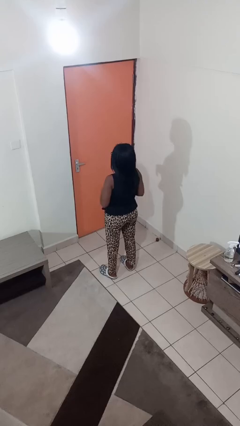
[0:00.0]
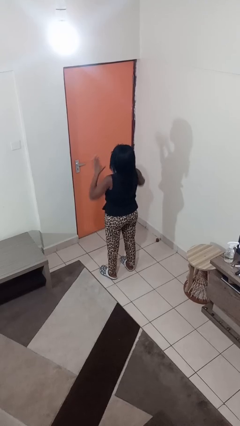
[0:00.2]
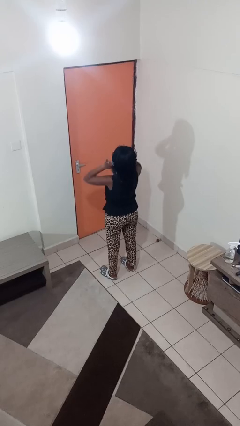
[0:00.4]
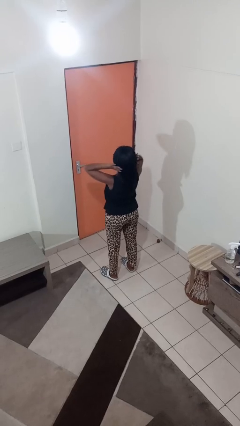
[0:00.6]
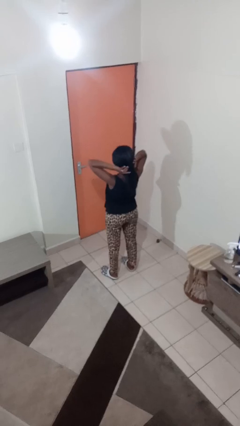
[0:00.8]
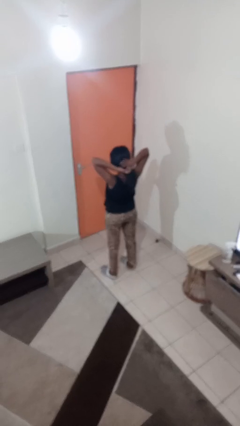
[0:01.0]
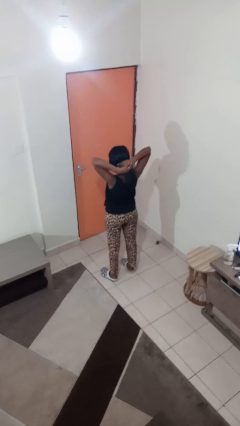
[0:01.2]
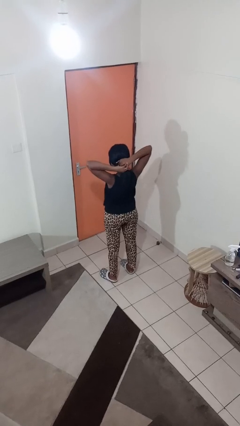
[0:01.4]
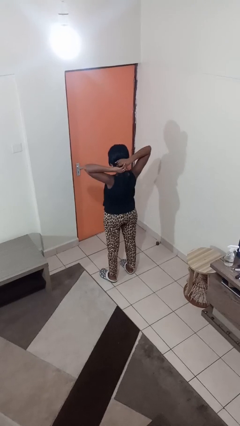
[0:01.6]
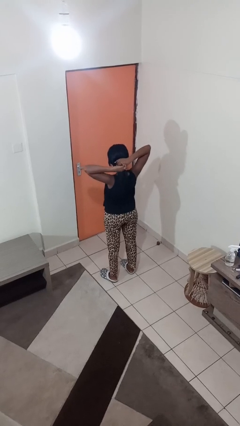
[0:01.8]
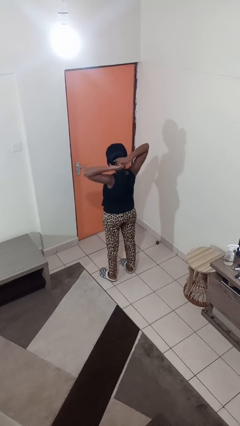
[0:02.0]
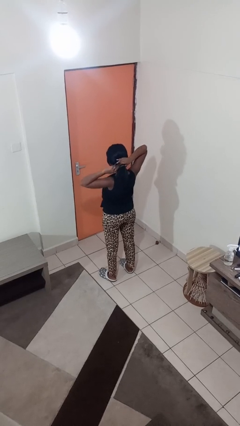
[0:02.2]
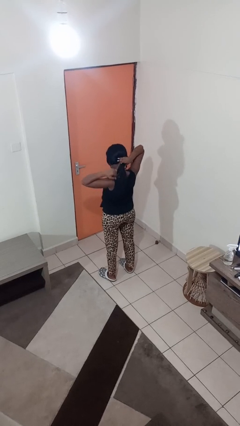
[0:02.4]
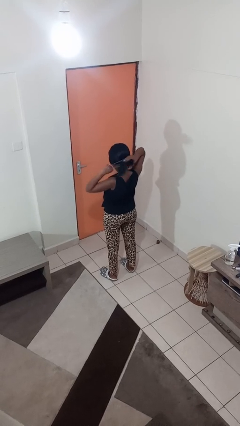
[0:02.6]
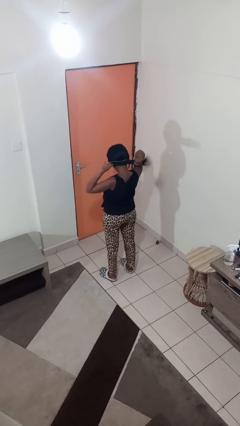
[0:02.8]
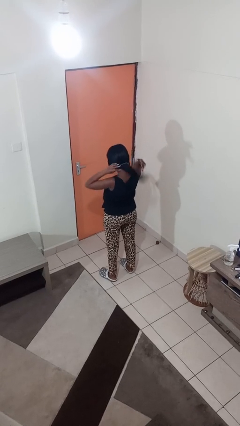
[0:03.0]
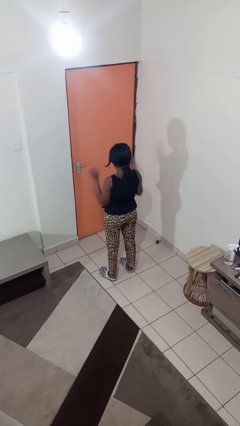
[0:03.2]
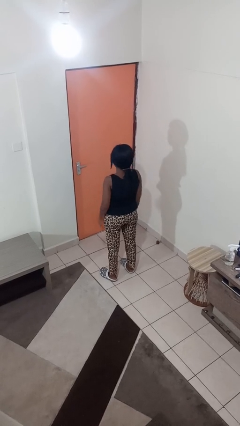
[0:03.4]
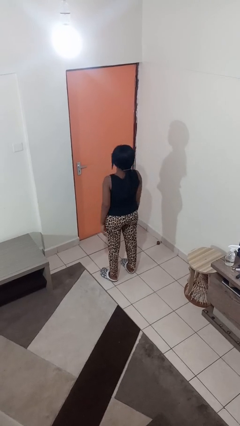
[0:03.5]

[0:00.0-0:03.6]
person puts hair in ponytail

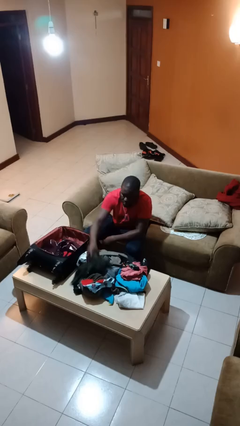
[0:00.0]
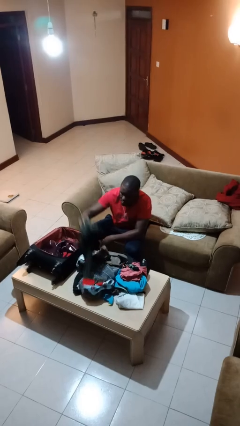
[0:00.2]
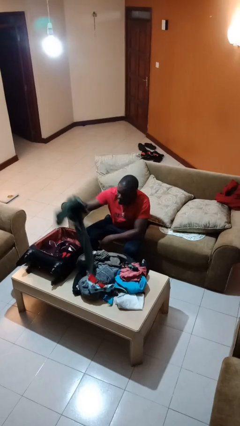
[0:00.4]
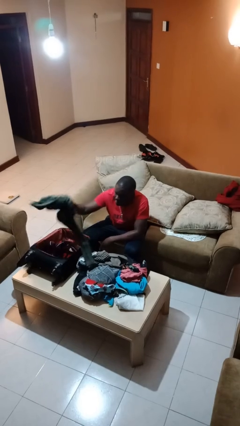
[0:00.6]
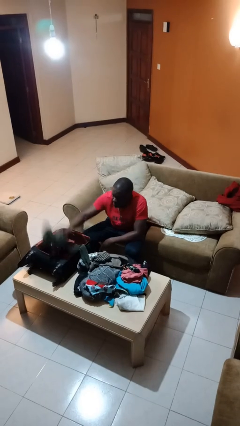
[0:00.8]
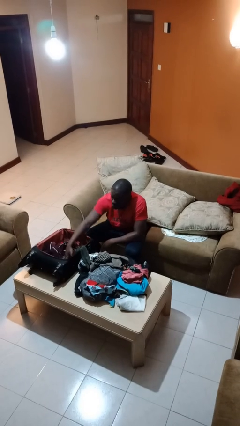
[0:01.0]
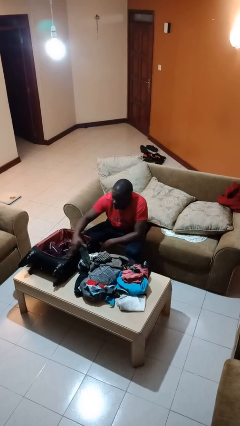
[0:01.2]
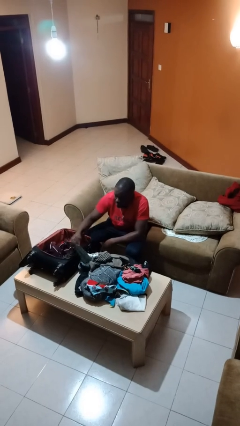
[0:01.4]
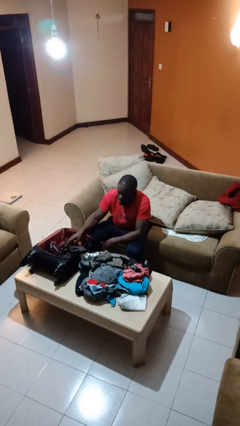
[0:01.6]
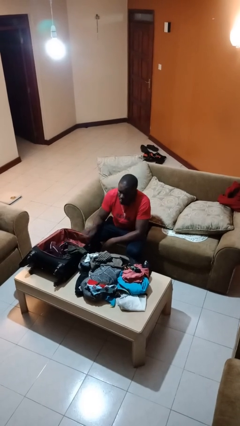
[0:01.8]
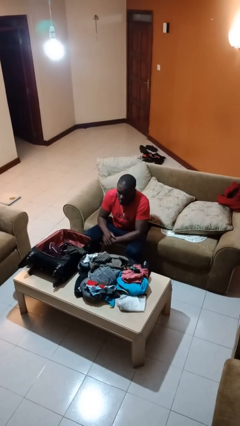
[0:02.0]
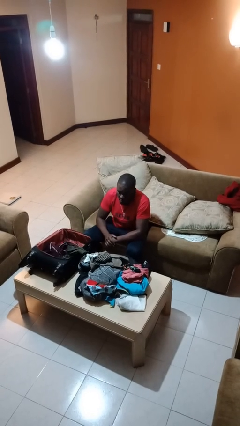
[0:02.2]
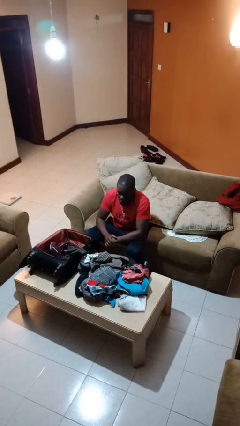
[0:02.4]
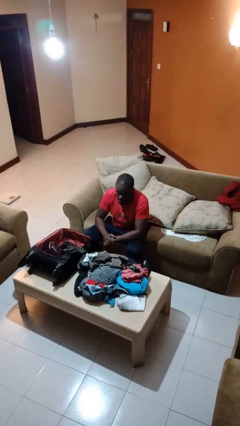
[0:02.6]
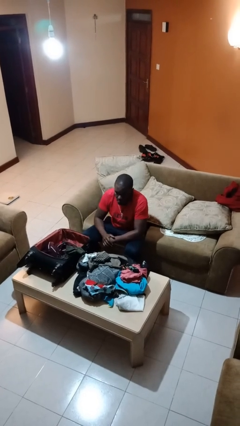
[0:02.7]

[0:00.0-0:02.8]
person loads clothes into suitcase

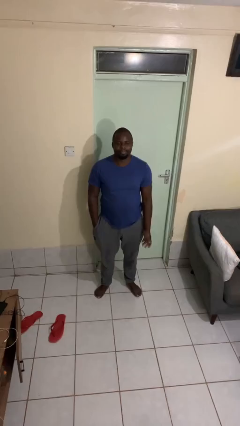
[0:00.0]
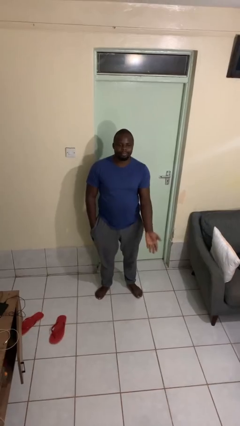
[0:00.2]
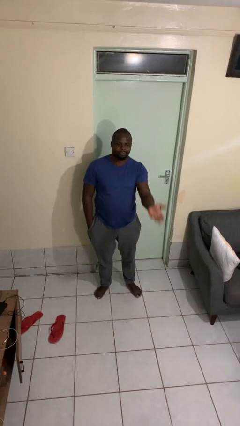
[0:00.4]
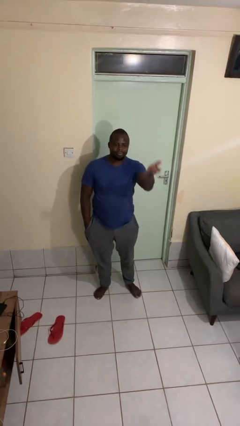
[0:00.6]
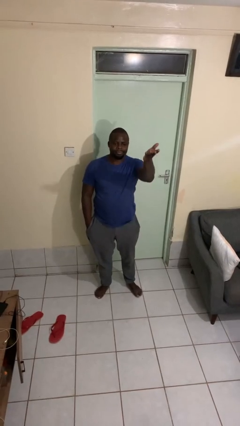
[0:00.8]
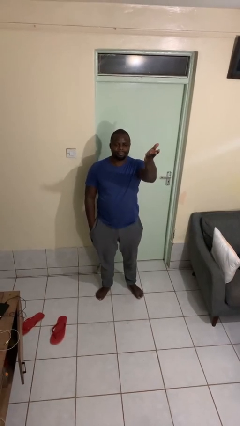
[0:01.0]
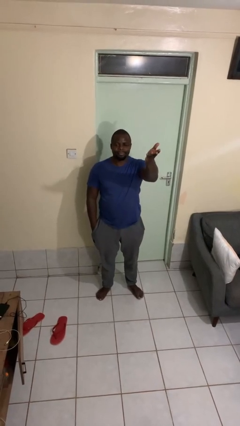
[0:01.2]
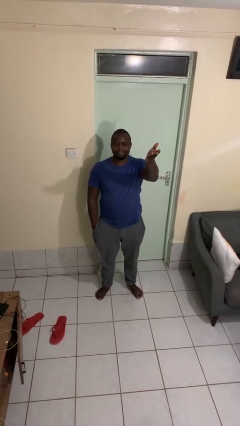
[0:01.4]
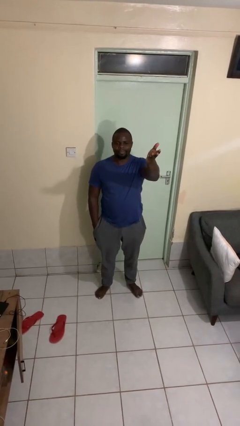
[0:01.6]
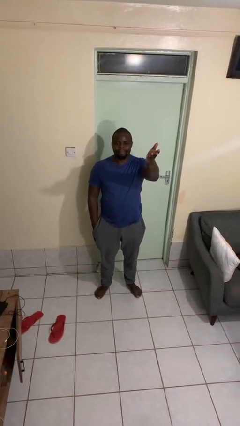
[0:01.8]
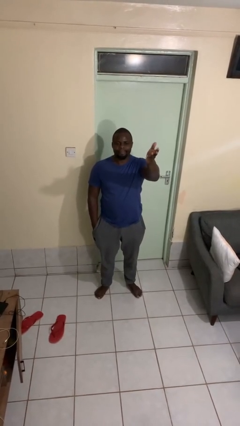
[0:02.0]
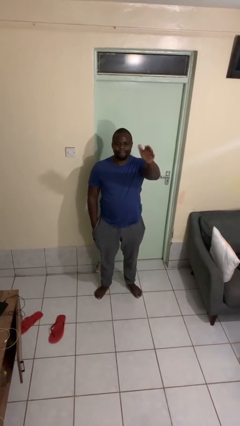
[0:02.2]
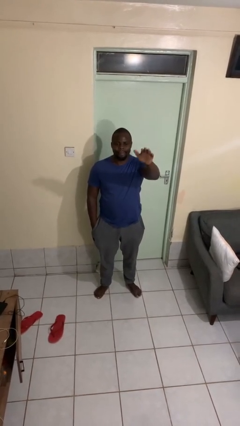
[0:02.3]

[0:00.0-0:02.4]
person gestures swipe up

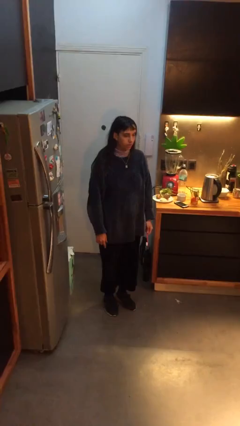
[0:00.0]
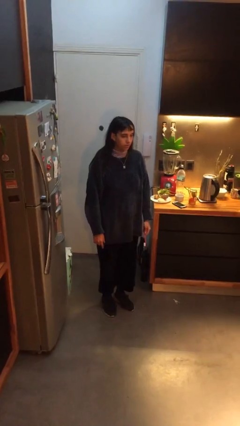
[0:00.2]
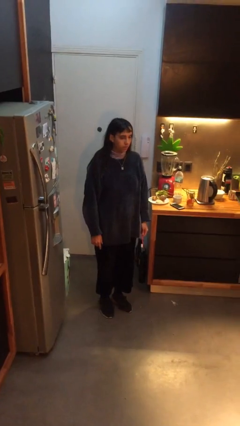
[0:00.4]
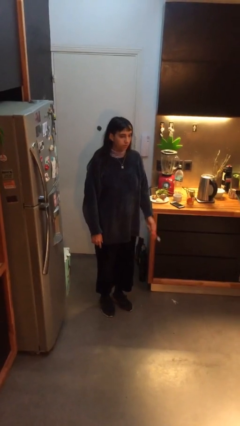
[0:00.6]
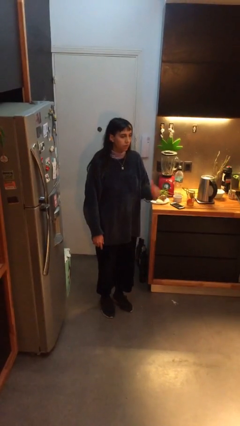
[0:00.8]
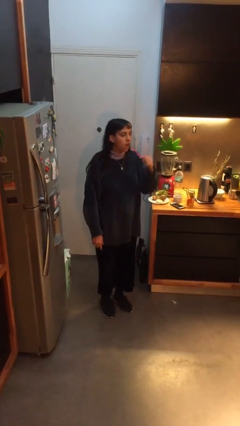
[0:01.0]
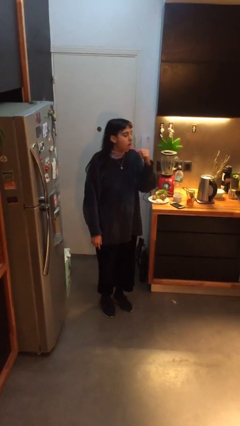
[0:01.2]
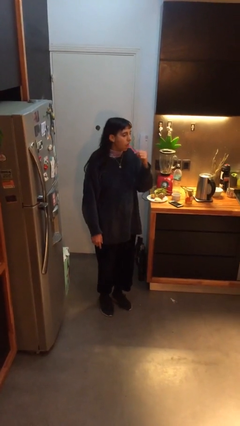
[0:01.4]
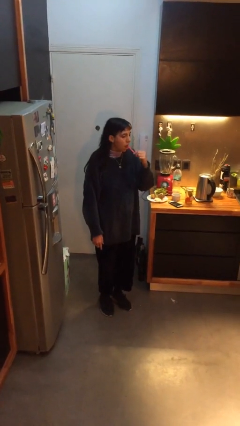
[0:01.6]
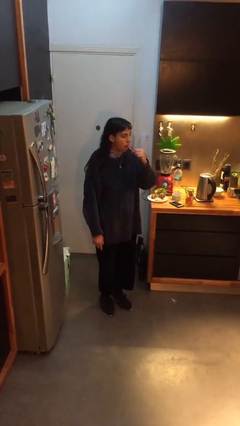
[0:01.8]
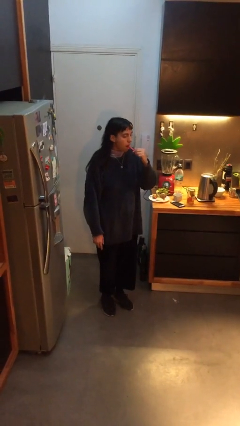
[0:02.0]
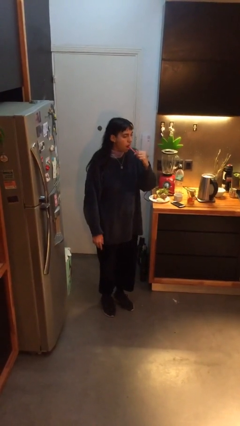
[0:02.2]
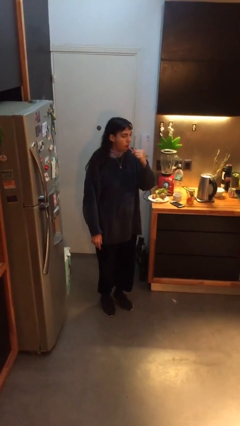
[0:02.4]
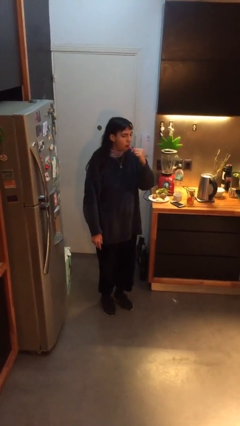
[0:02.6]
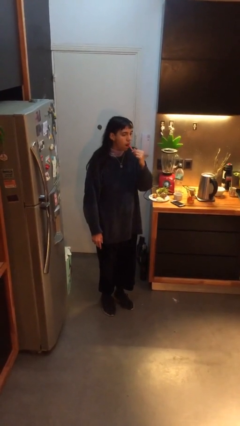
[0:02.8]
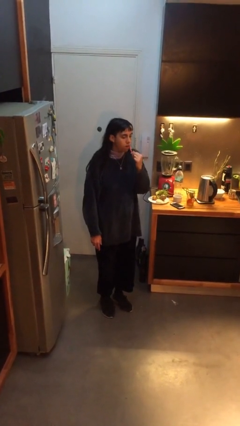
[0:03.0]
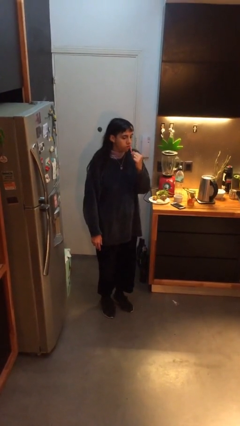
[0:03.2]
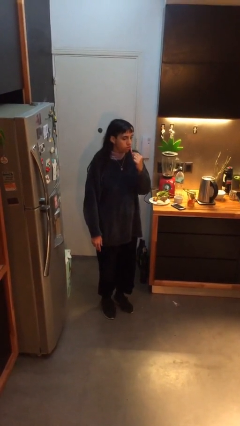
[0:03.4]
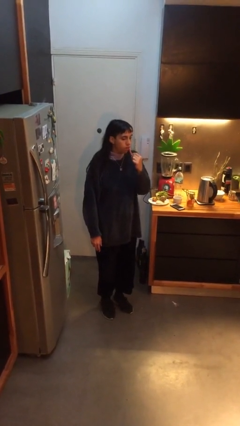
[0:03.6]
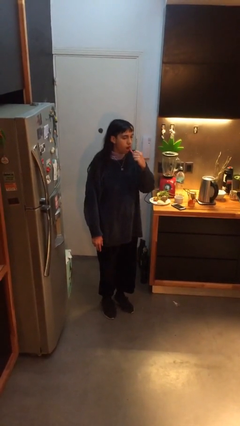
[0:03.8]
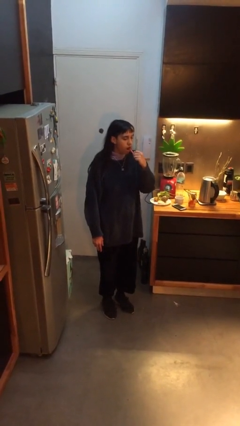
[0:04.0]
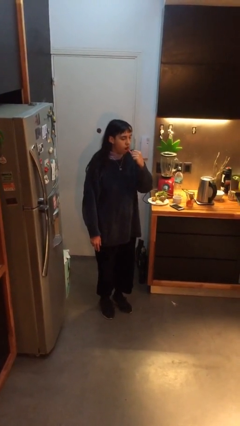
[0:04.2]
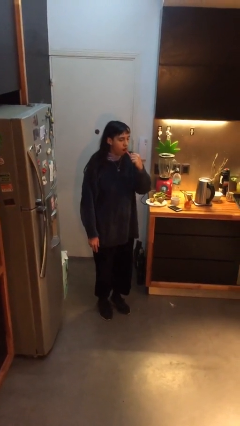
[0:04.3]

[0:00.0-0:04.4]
person brushes teeth

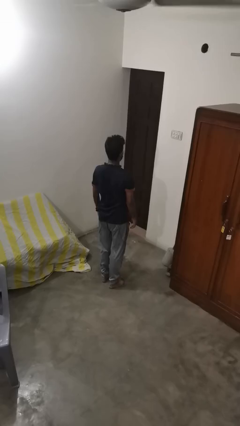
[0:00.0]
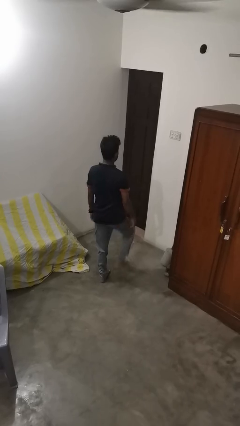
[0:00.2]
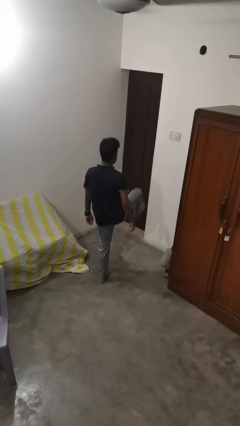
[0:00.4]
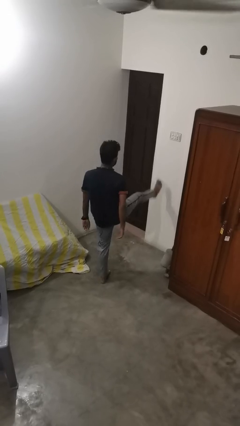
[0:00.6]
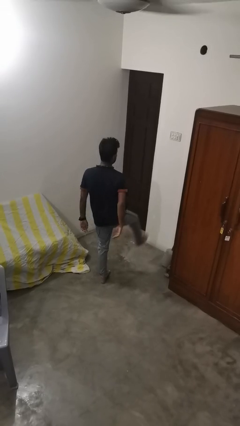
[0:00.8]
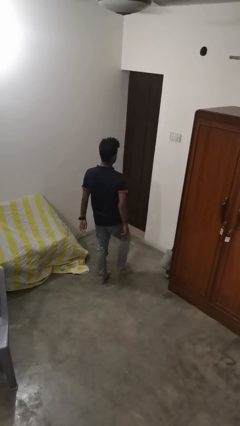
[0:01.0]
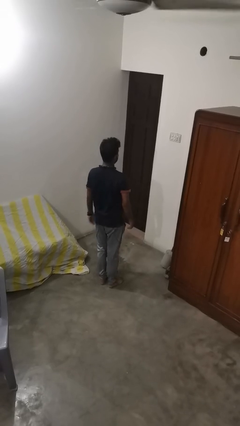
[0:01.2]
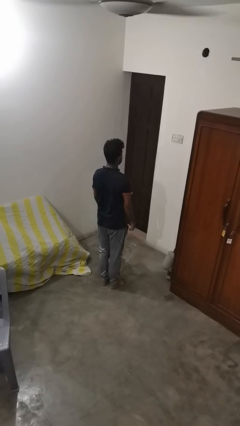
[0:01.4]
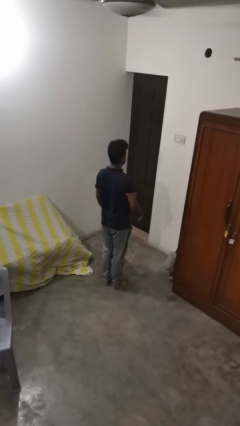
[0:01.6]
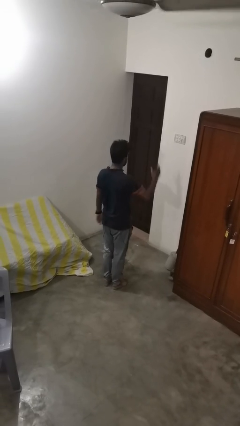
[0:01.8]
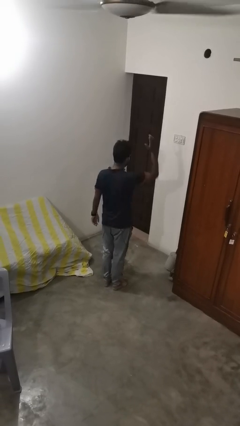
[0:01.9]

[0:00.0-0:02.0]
person karate kicks

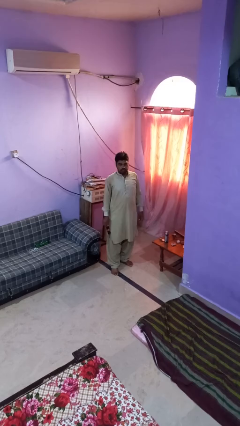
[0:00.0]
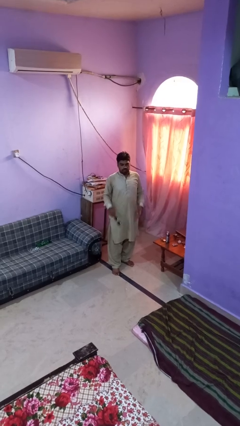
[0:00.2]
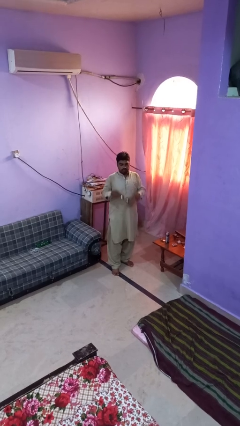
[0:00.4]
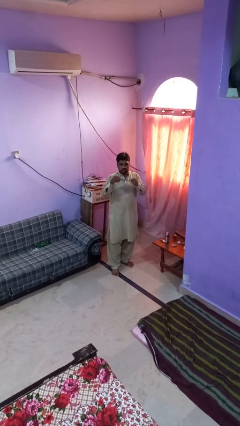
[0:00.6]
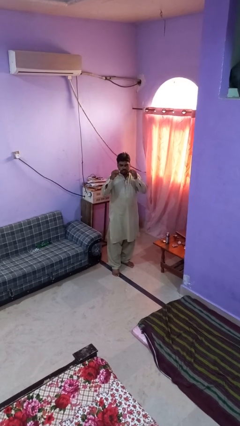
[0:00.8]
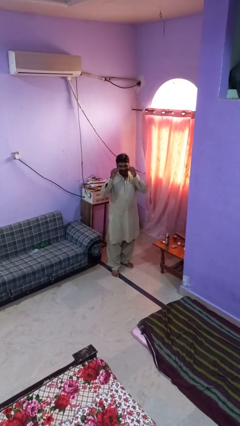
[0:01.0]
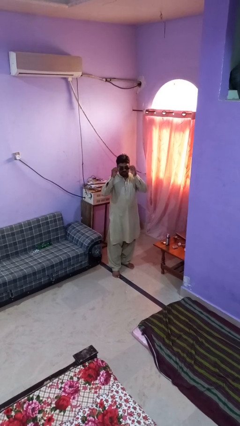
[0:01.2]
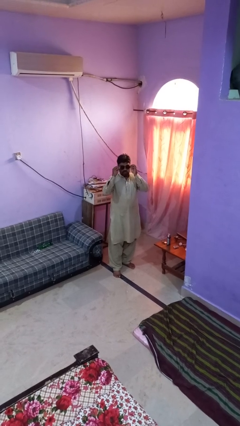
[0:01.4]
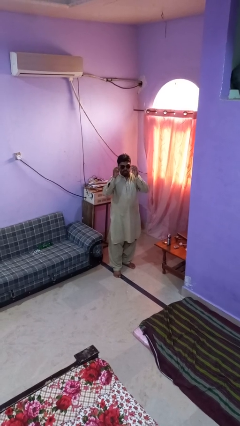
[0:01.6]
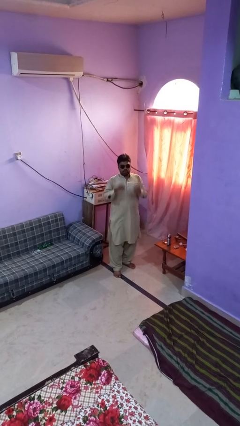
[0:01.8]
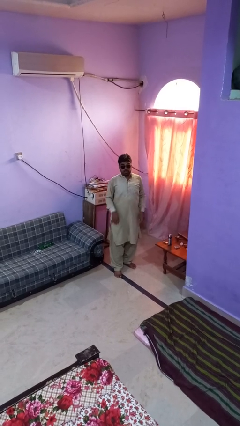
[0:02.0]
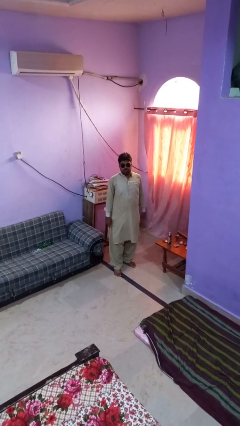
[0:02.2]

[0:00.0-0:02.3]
person puts on sunglasses
